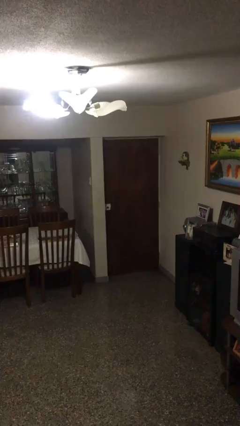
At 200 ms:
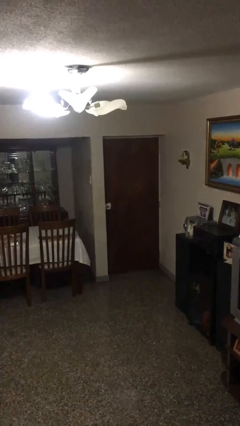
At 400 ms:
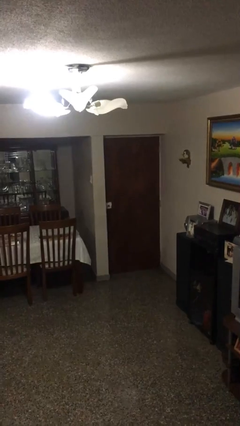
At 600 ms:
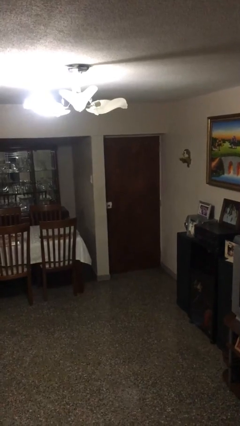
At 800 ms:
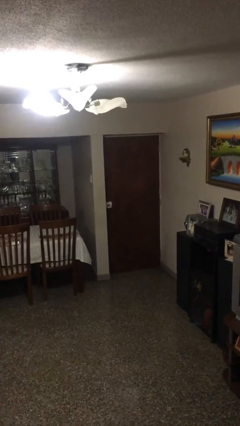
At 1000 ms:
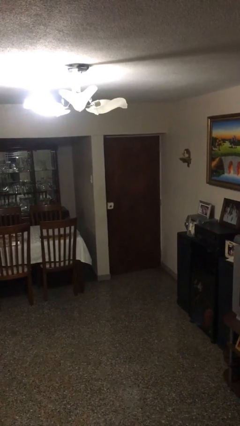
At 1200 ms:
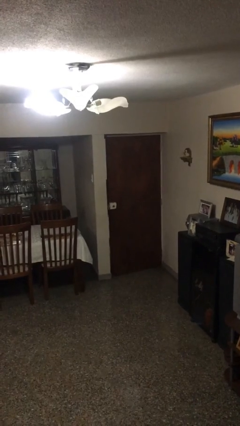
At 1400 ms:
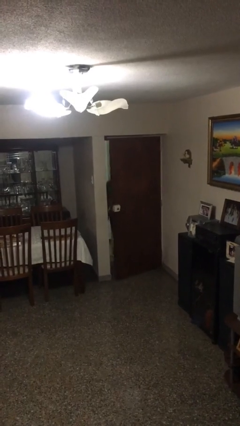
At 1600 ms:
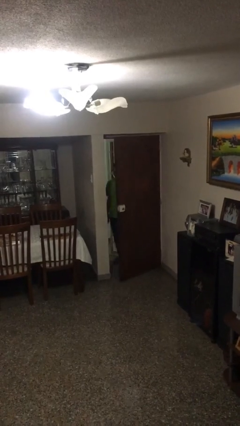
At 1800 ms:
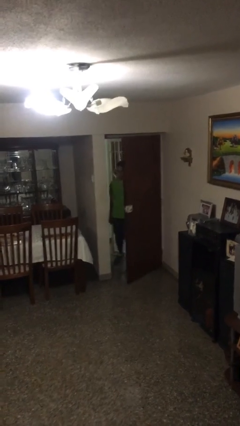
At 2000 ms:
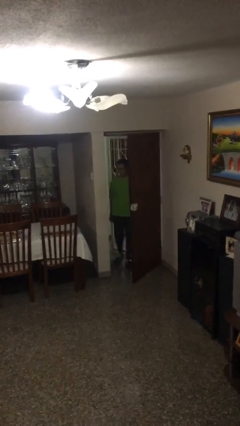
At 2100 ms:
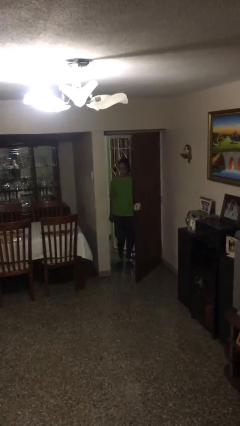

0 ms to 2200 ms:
person opens facility door

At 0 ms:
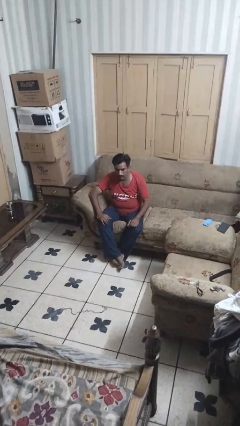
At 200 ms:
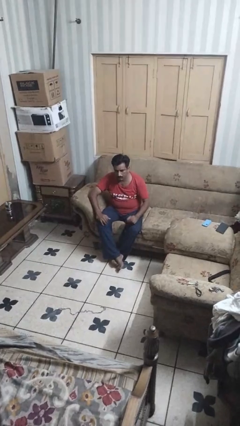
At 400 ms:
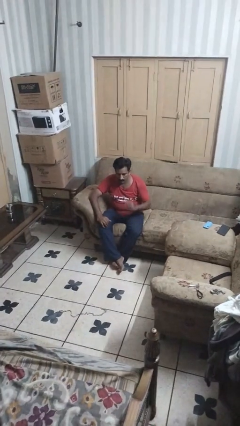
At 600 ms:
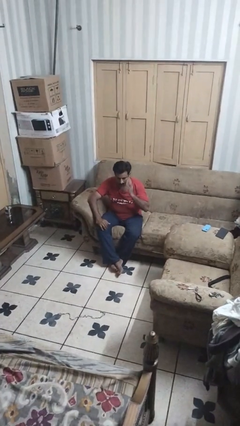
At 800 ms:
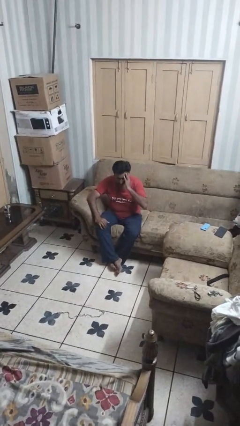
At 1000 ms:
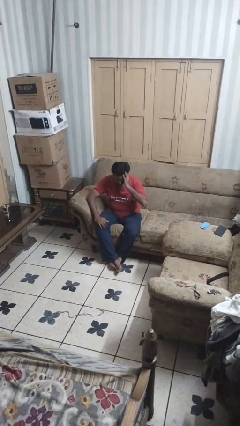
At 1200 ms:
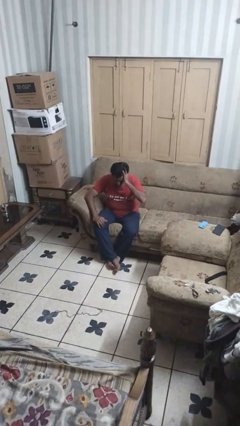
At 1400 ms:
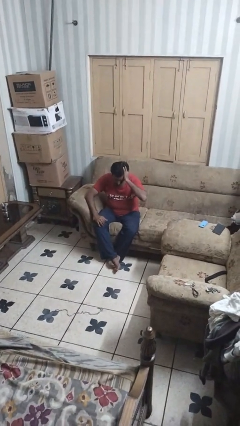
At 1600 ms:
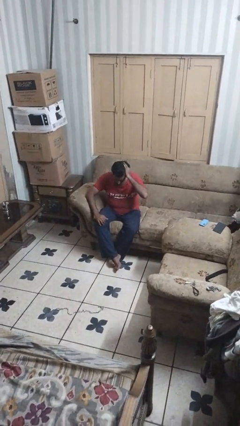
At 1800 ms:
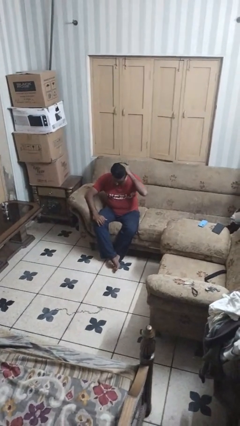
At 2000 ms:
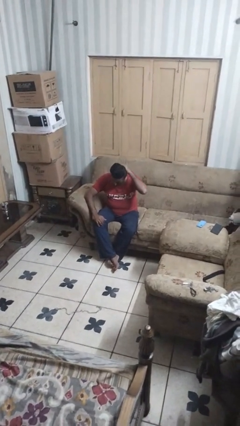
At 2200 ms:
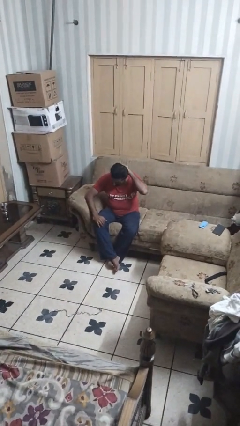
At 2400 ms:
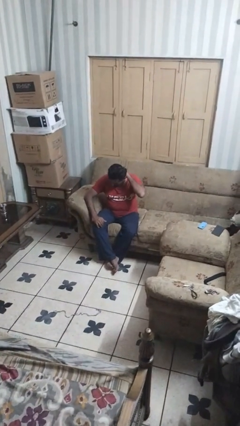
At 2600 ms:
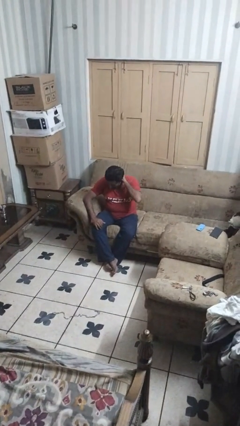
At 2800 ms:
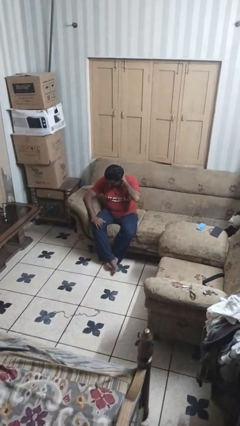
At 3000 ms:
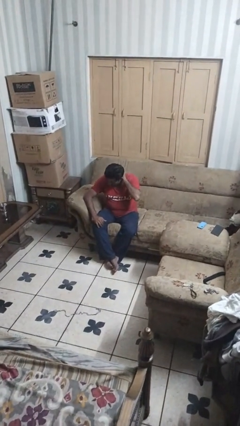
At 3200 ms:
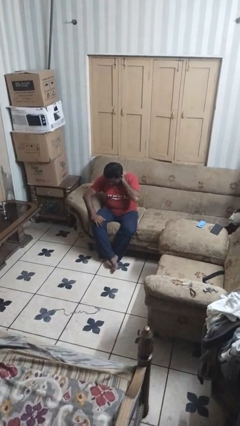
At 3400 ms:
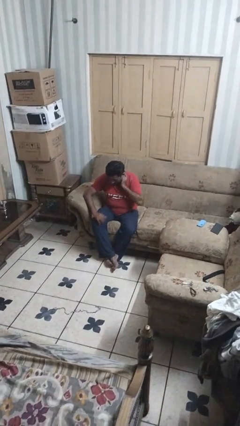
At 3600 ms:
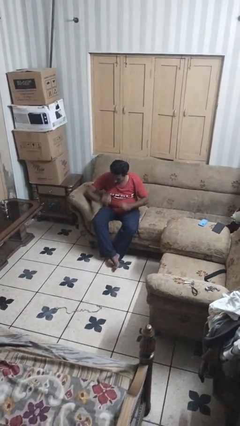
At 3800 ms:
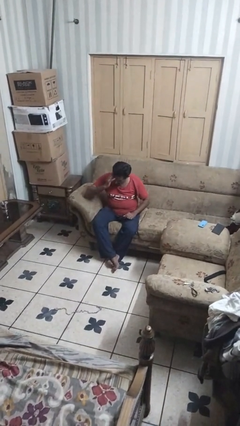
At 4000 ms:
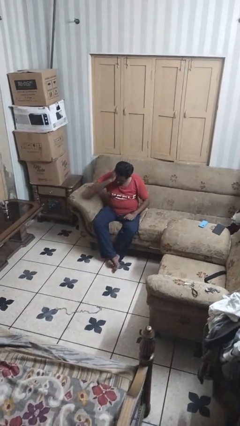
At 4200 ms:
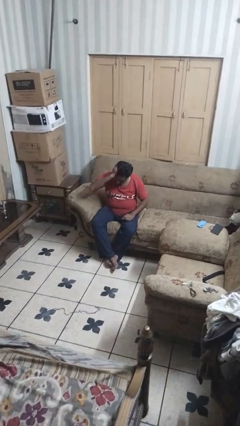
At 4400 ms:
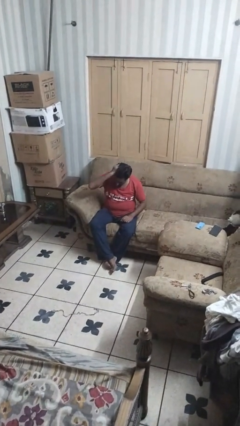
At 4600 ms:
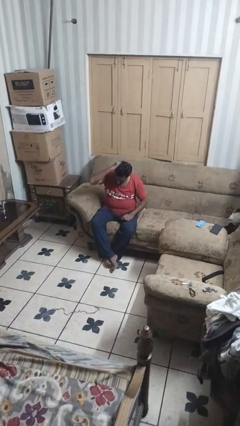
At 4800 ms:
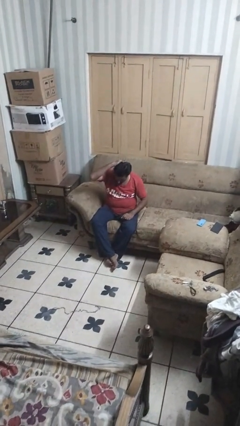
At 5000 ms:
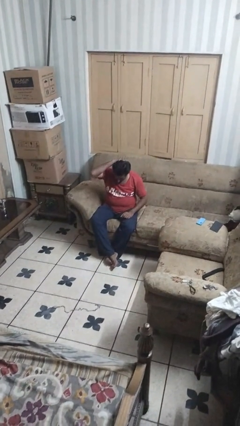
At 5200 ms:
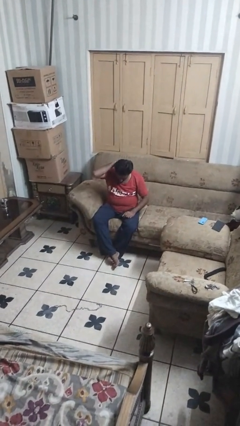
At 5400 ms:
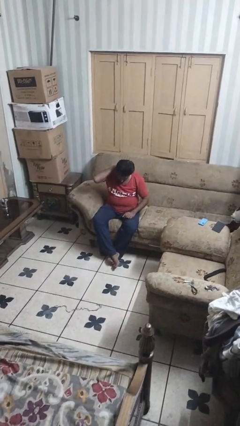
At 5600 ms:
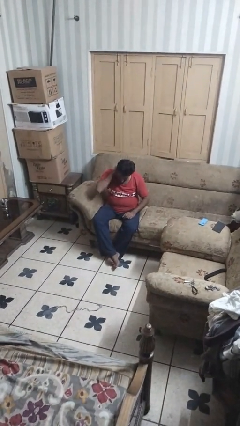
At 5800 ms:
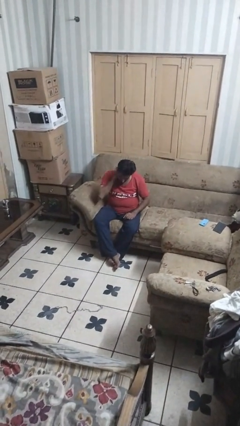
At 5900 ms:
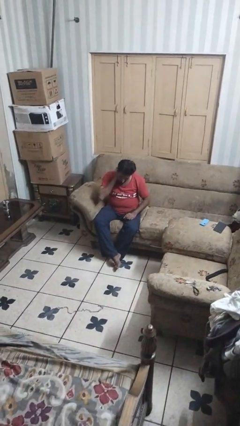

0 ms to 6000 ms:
person strokes hair

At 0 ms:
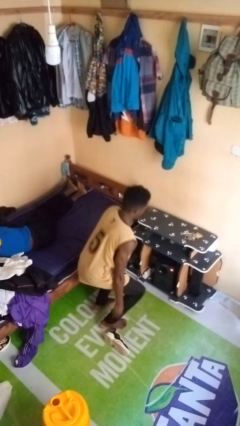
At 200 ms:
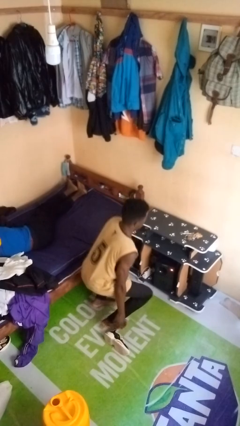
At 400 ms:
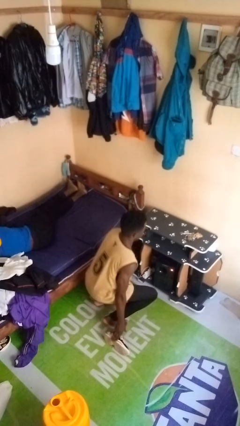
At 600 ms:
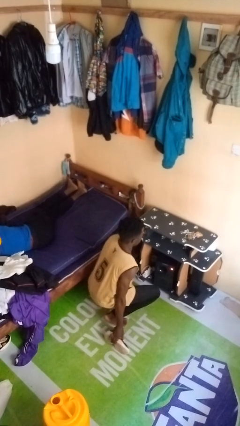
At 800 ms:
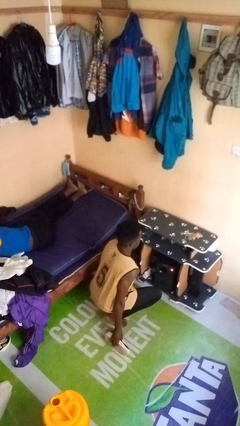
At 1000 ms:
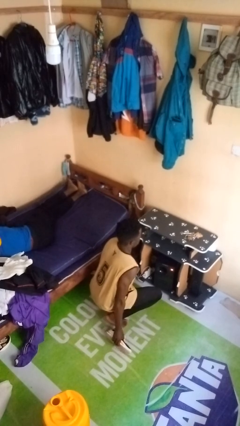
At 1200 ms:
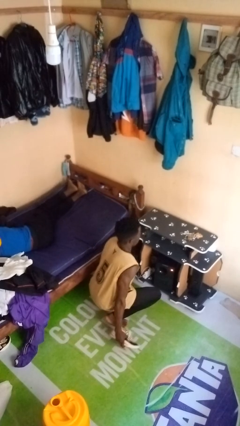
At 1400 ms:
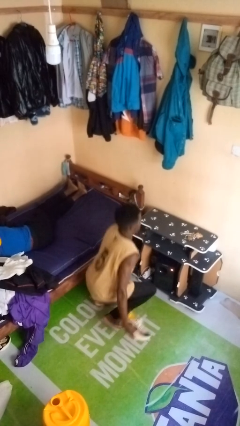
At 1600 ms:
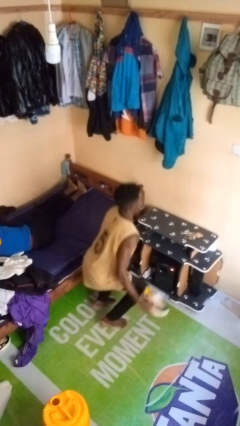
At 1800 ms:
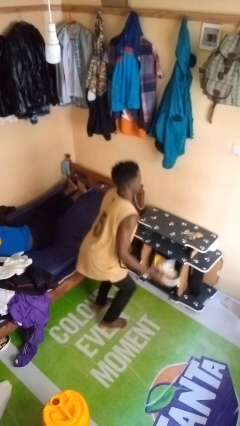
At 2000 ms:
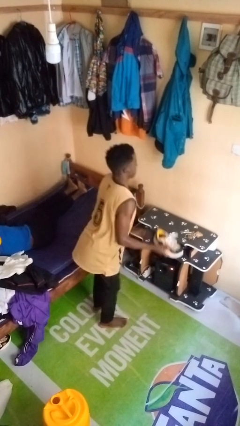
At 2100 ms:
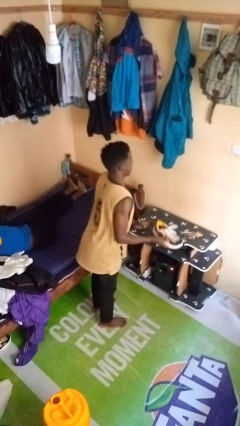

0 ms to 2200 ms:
person picks up object from floor

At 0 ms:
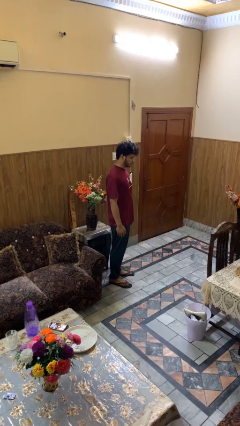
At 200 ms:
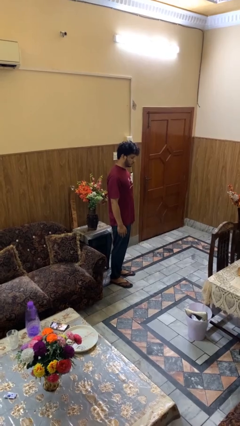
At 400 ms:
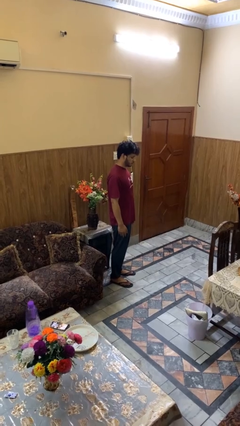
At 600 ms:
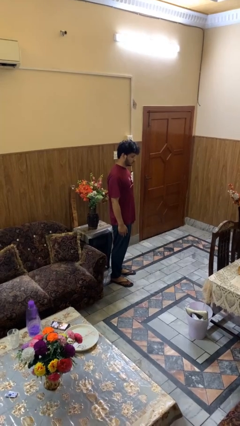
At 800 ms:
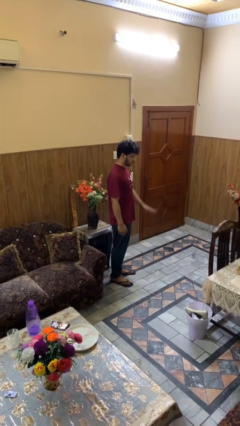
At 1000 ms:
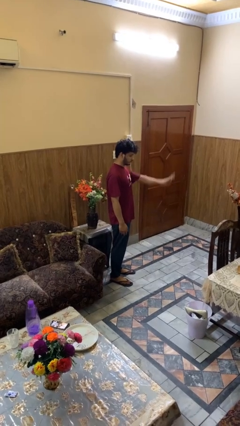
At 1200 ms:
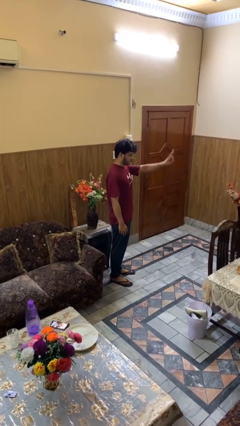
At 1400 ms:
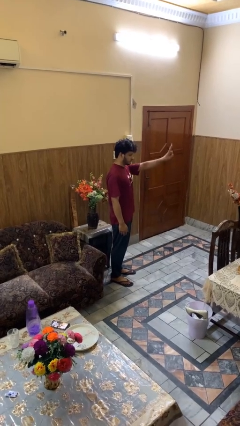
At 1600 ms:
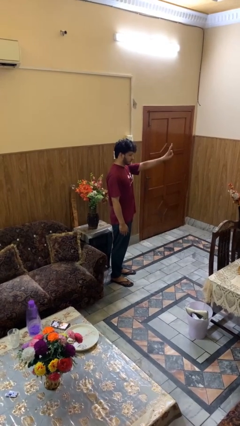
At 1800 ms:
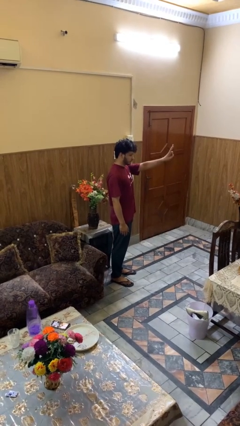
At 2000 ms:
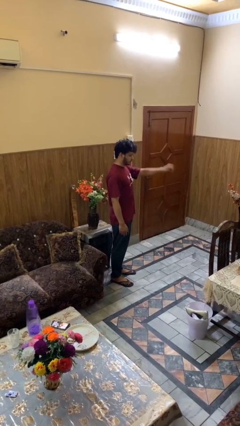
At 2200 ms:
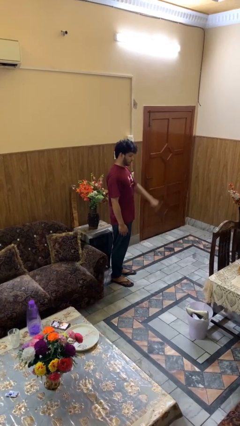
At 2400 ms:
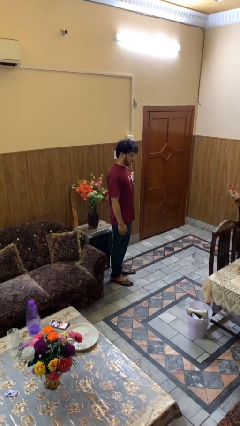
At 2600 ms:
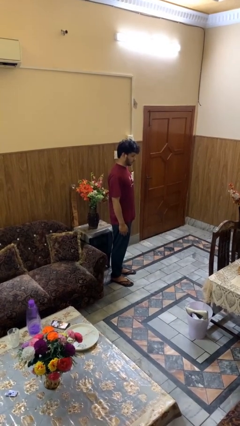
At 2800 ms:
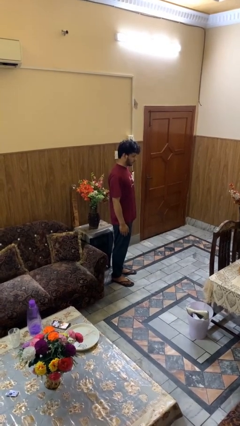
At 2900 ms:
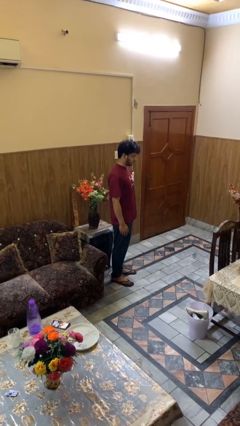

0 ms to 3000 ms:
person gestures peace

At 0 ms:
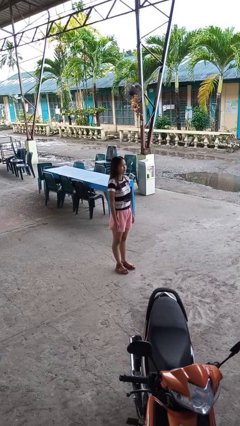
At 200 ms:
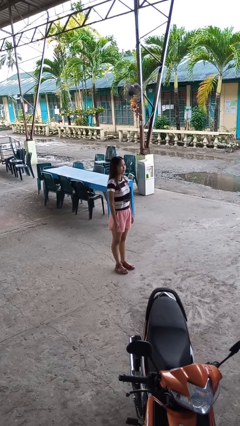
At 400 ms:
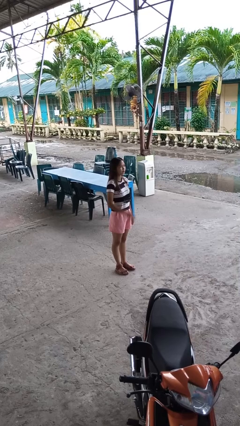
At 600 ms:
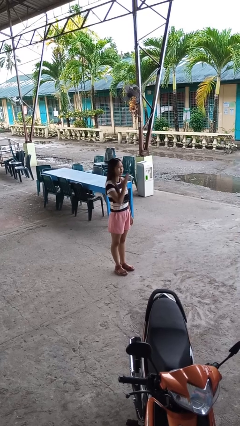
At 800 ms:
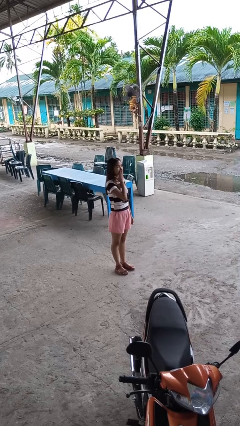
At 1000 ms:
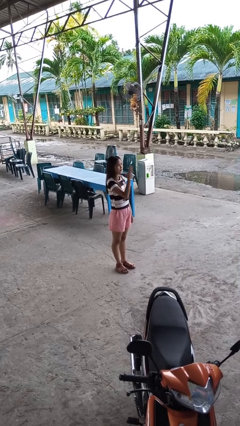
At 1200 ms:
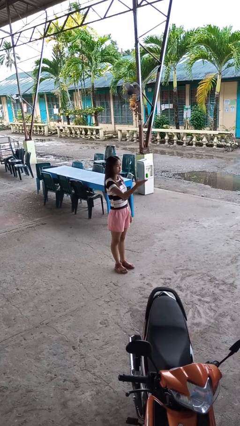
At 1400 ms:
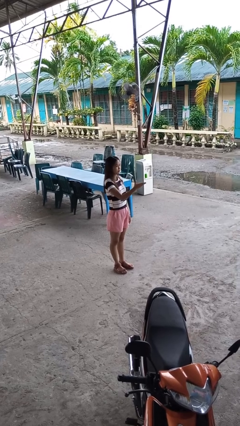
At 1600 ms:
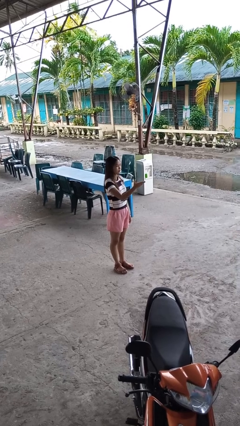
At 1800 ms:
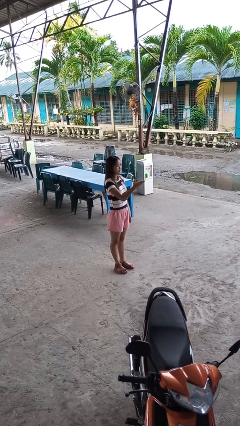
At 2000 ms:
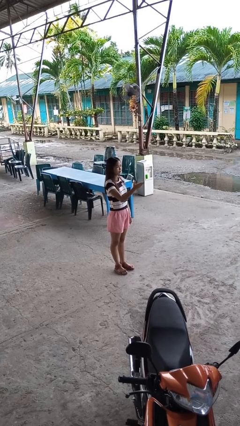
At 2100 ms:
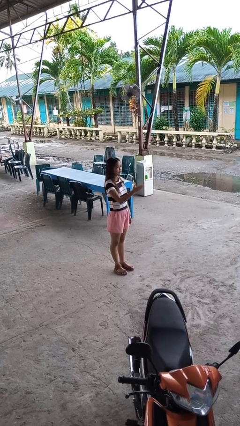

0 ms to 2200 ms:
person gestures blow kiss

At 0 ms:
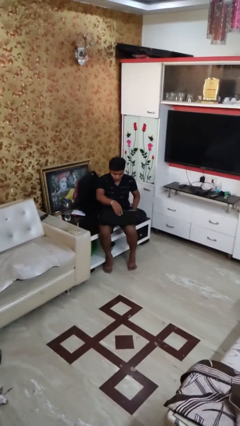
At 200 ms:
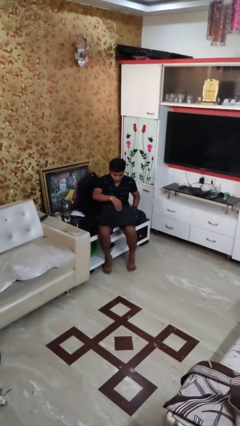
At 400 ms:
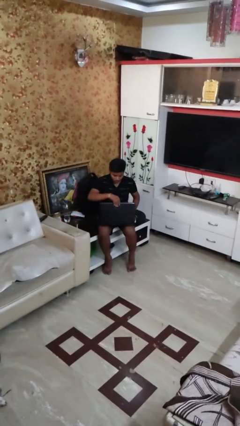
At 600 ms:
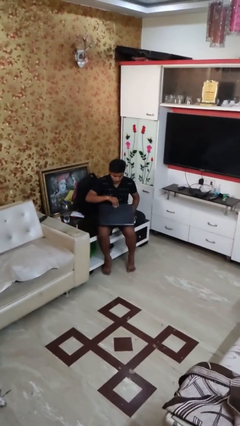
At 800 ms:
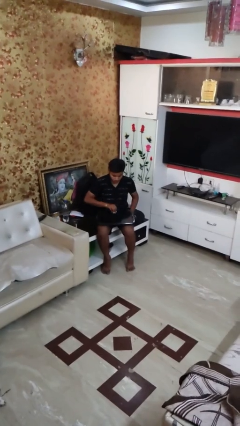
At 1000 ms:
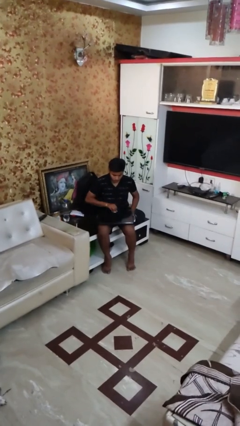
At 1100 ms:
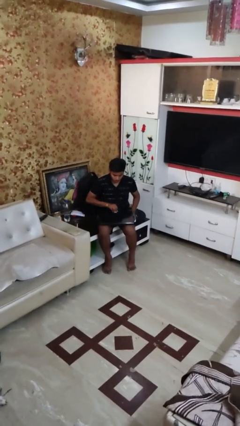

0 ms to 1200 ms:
person closes laptop

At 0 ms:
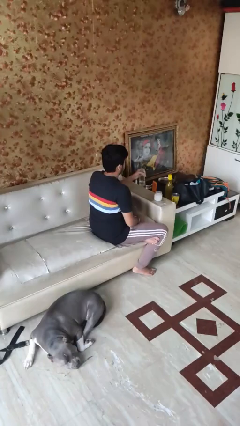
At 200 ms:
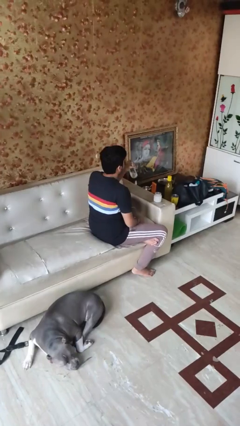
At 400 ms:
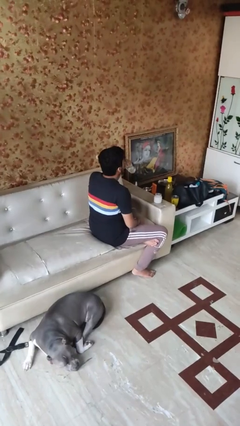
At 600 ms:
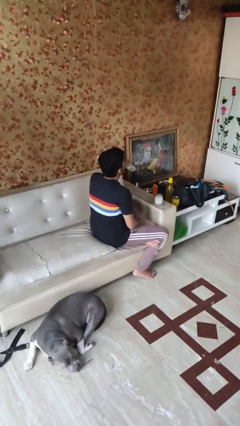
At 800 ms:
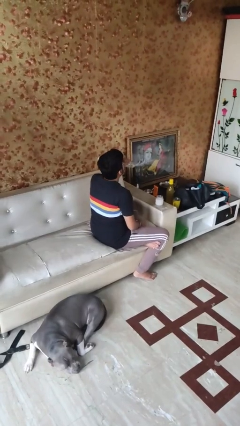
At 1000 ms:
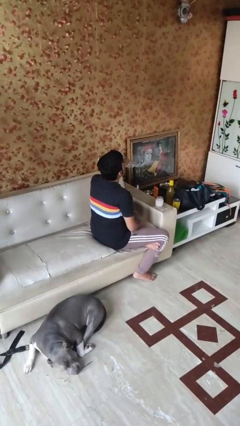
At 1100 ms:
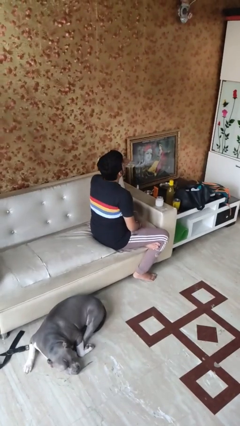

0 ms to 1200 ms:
person drinks from cup
